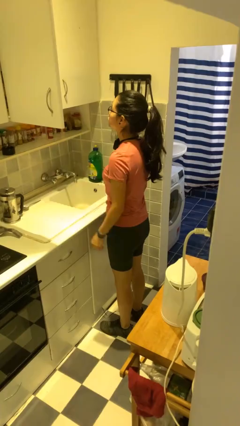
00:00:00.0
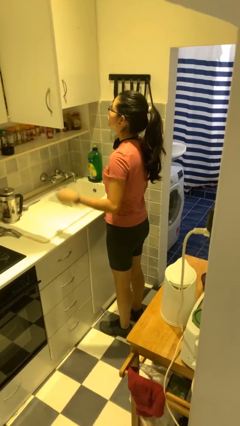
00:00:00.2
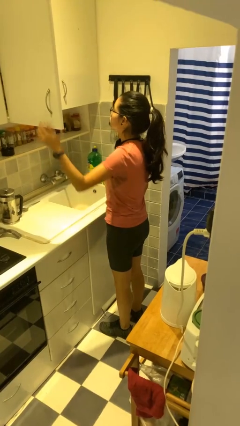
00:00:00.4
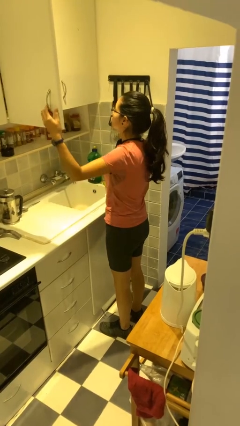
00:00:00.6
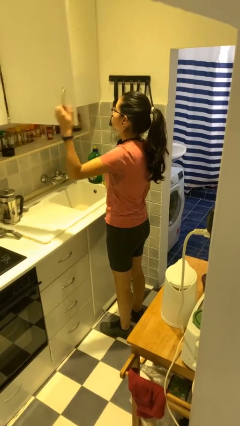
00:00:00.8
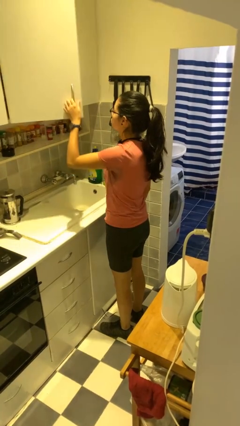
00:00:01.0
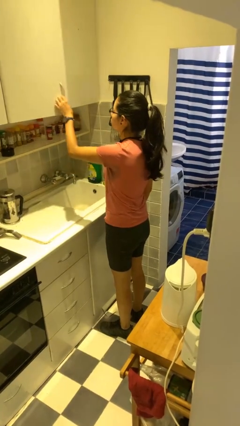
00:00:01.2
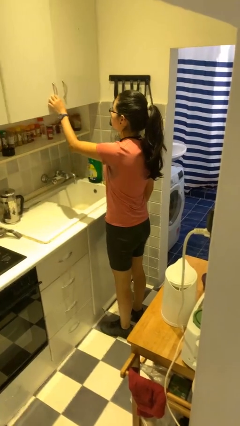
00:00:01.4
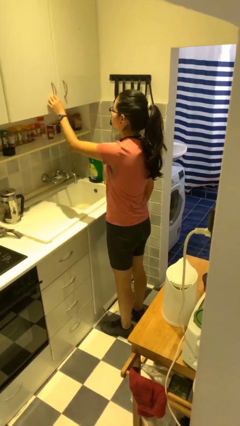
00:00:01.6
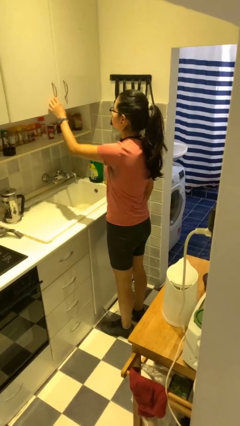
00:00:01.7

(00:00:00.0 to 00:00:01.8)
person closes cabinet

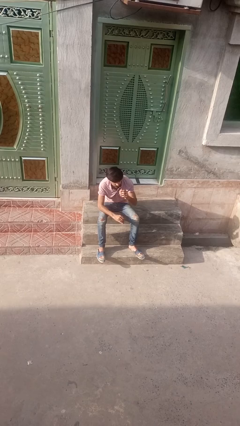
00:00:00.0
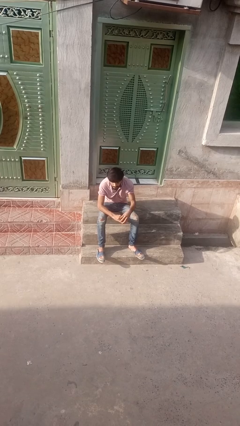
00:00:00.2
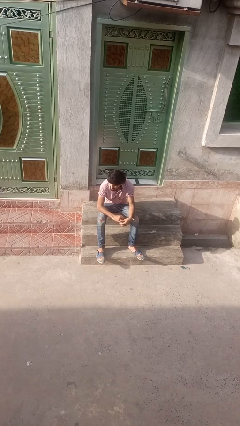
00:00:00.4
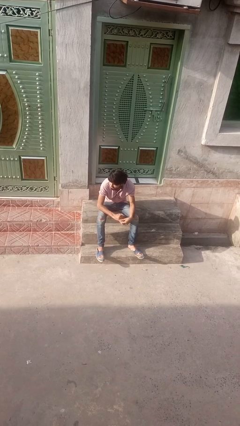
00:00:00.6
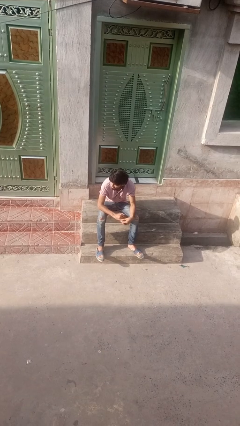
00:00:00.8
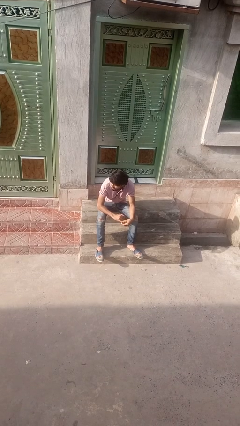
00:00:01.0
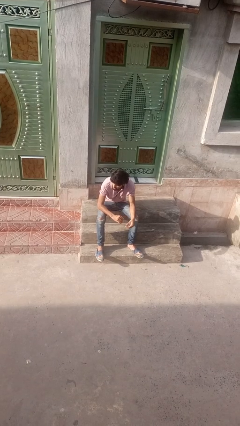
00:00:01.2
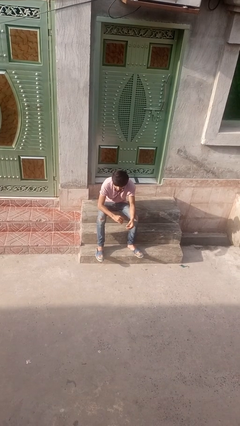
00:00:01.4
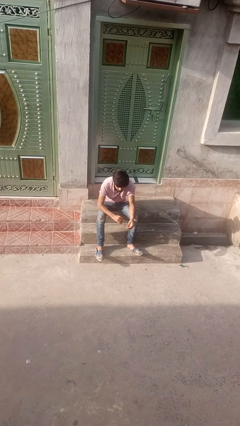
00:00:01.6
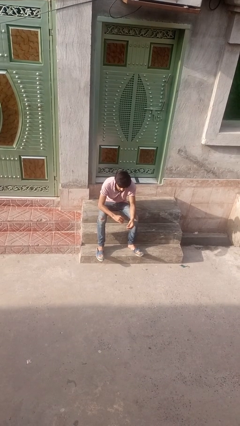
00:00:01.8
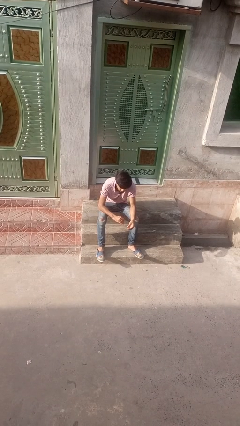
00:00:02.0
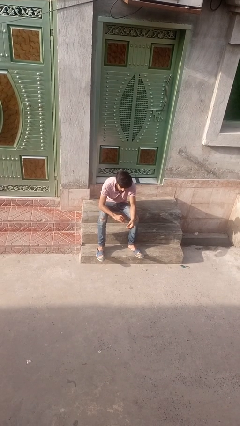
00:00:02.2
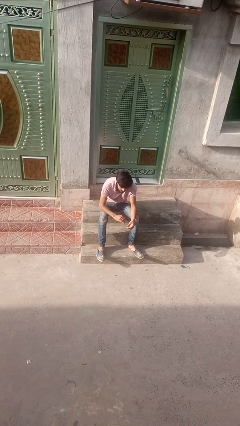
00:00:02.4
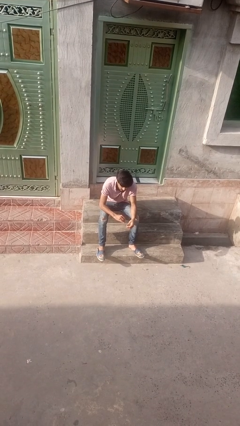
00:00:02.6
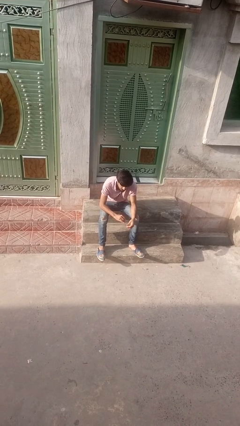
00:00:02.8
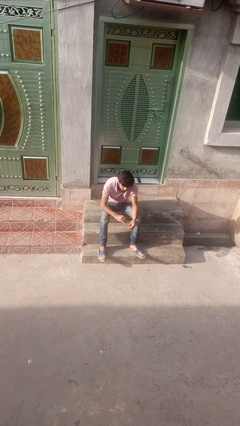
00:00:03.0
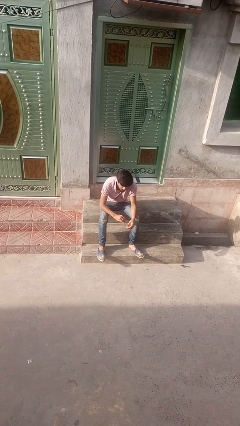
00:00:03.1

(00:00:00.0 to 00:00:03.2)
person takes off ring

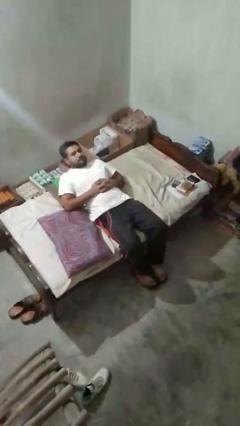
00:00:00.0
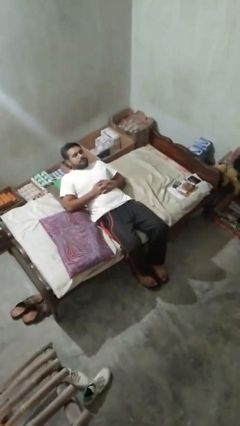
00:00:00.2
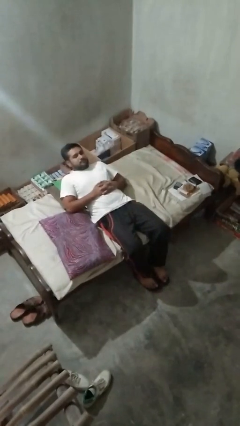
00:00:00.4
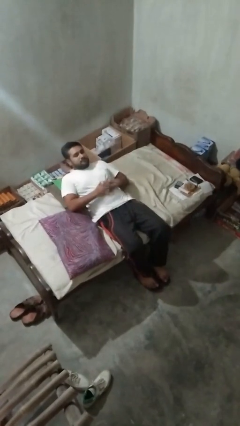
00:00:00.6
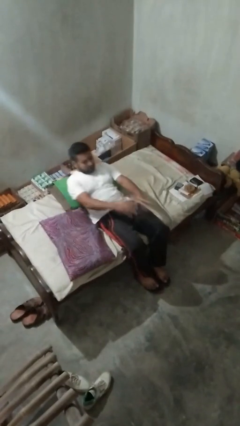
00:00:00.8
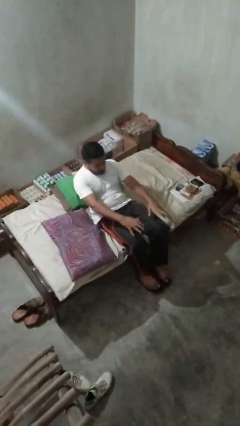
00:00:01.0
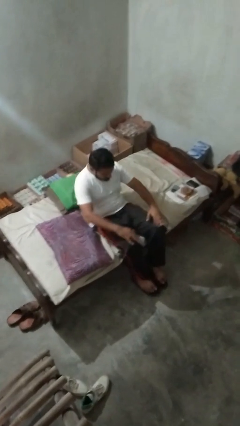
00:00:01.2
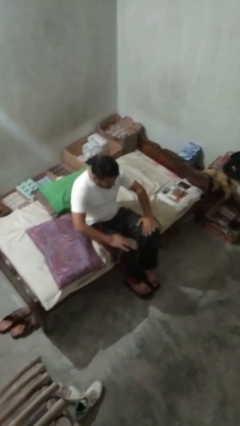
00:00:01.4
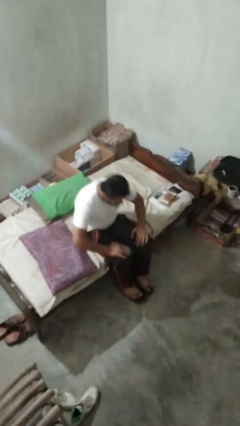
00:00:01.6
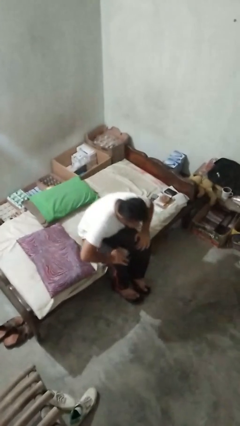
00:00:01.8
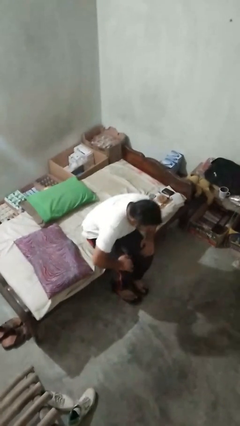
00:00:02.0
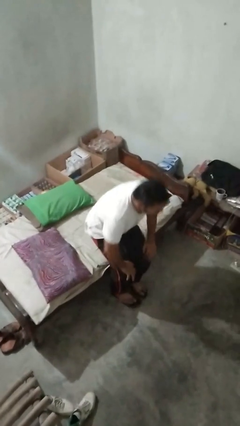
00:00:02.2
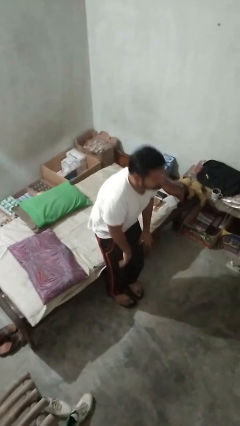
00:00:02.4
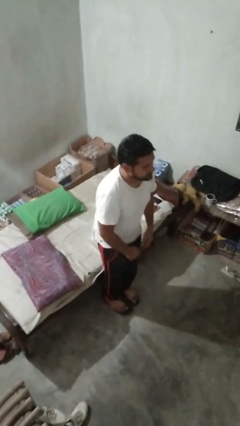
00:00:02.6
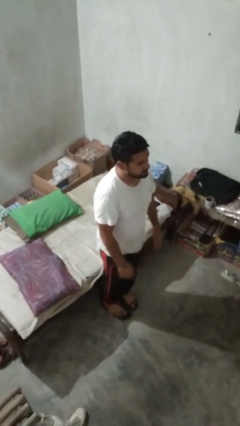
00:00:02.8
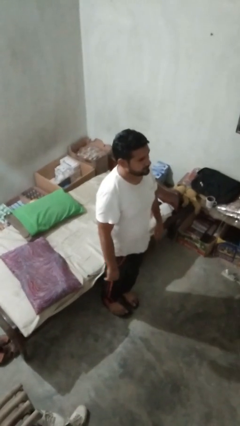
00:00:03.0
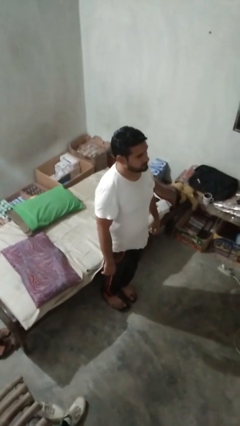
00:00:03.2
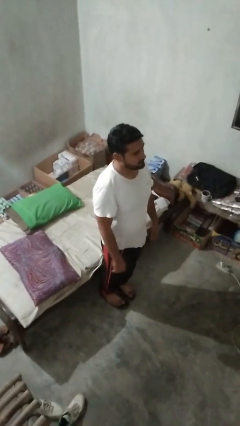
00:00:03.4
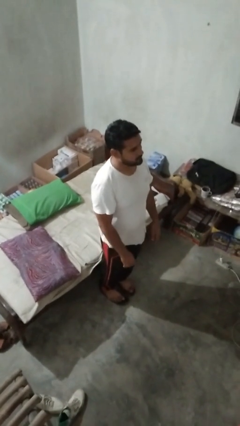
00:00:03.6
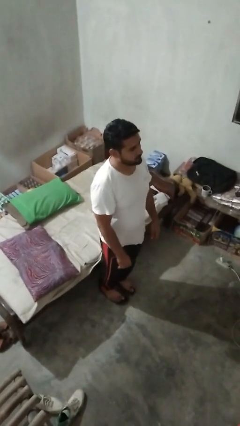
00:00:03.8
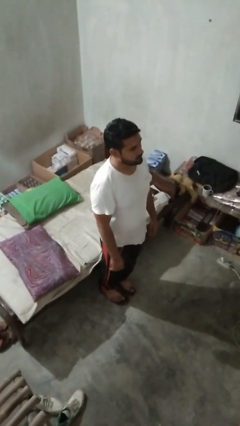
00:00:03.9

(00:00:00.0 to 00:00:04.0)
person stands up

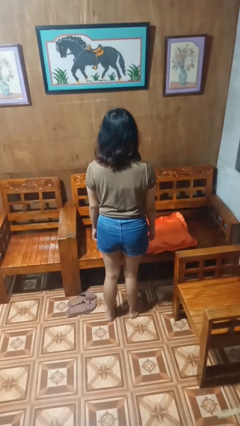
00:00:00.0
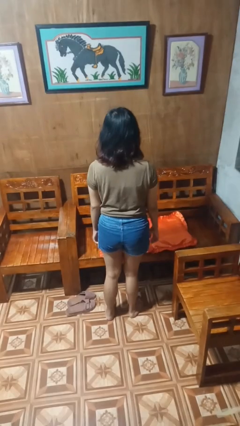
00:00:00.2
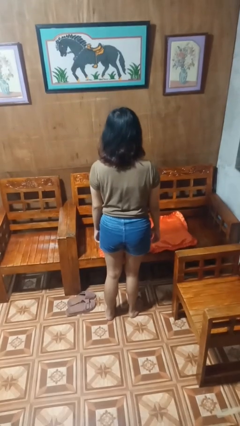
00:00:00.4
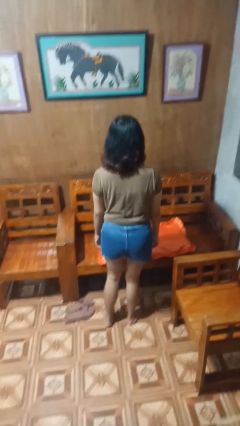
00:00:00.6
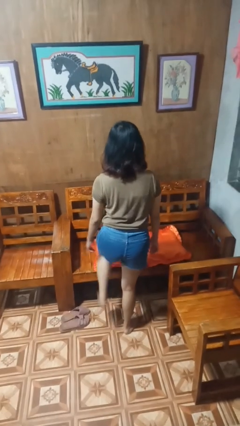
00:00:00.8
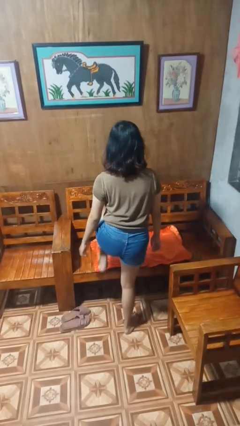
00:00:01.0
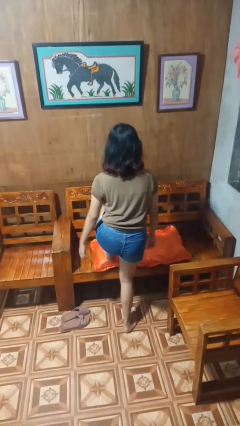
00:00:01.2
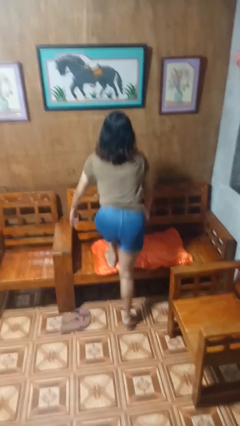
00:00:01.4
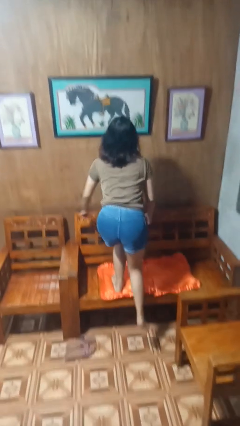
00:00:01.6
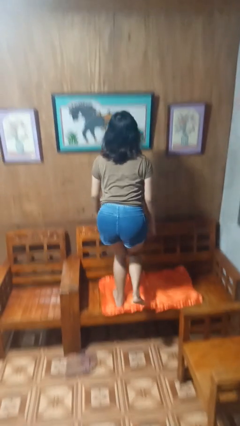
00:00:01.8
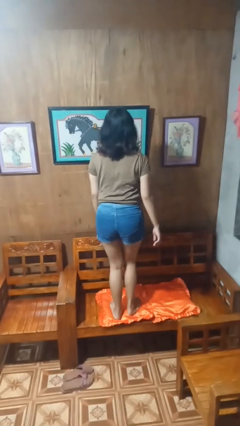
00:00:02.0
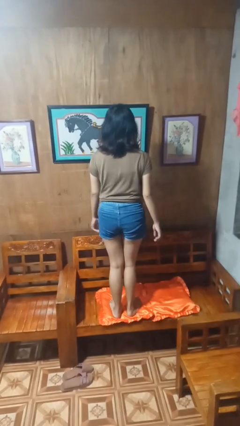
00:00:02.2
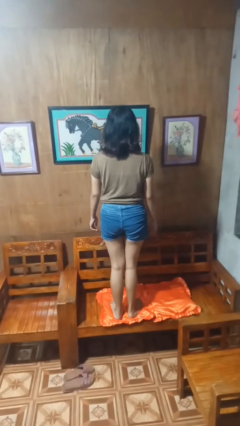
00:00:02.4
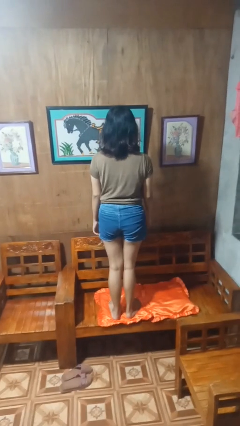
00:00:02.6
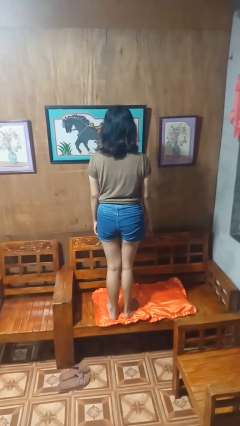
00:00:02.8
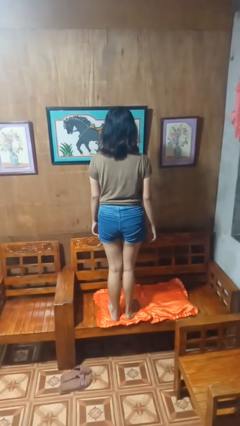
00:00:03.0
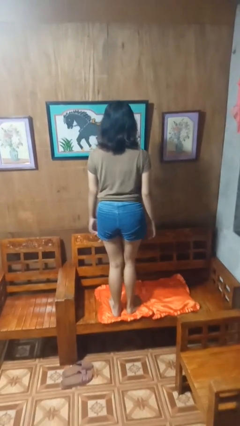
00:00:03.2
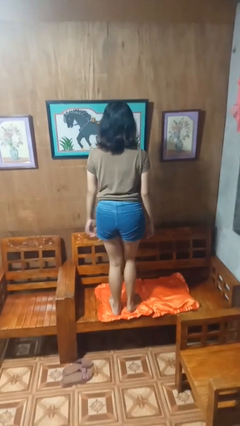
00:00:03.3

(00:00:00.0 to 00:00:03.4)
person climbs on couch

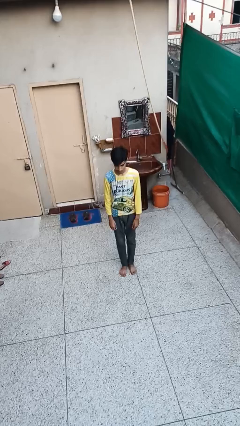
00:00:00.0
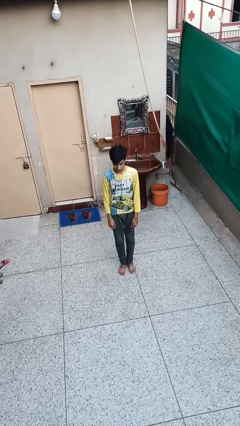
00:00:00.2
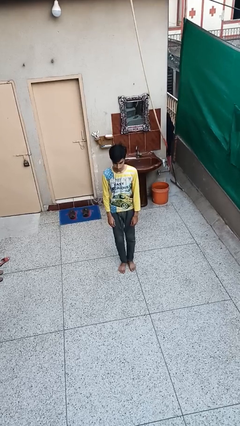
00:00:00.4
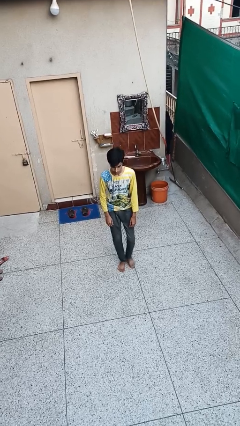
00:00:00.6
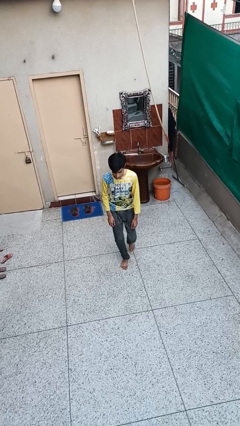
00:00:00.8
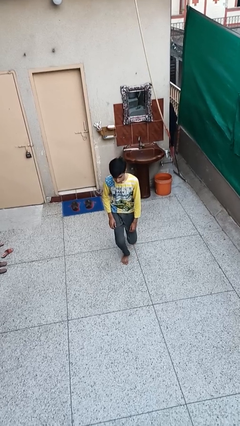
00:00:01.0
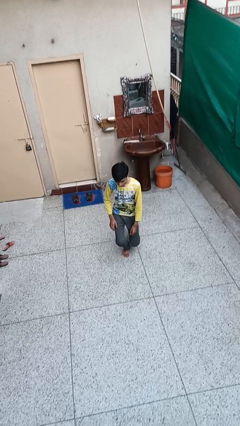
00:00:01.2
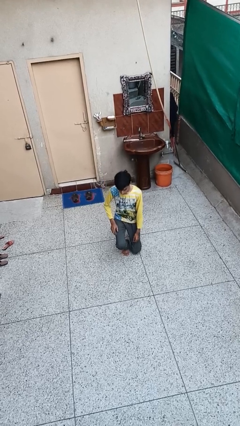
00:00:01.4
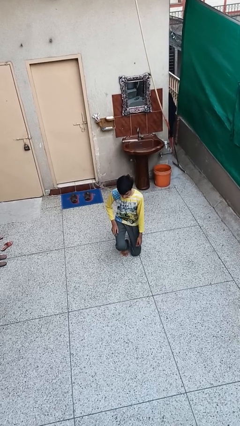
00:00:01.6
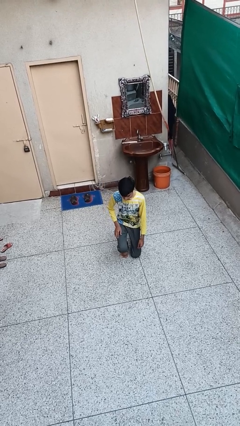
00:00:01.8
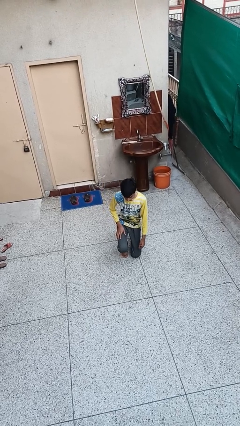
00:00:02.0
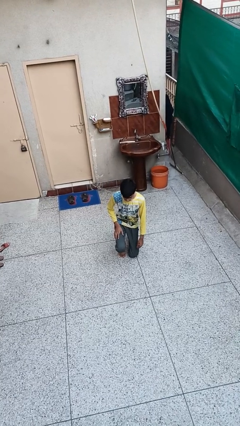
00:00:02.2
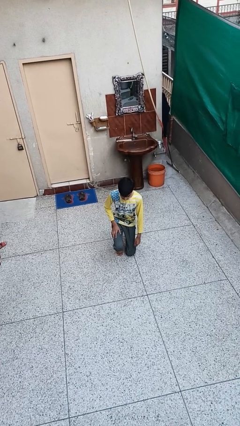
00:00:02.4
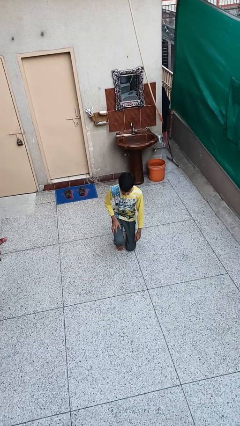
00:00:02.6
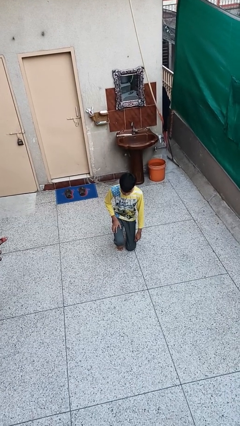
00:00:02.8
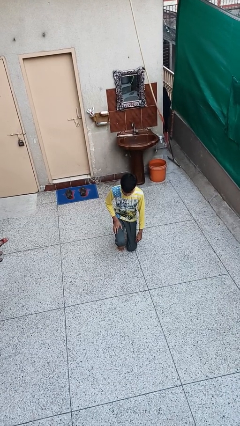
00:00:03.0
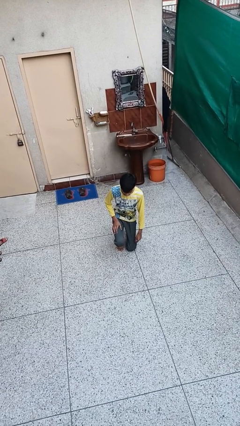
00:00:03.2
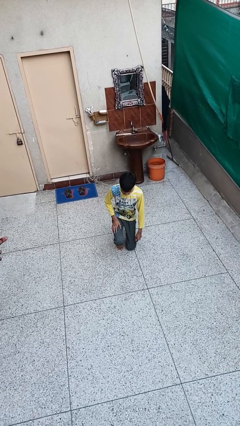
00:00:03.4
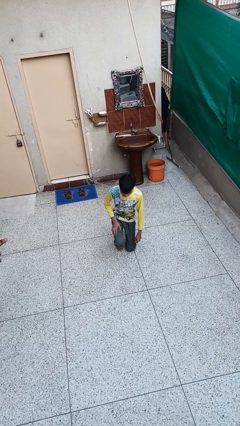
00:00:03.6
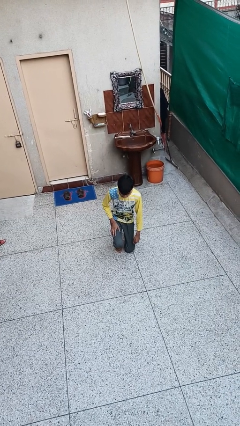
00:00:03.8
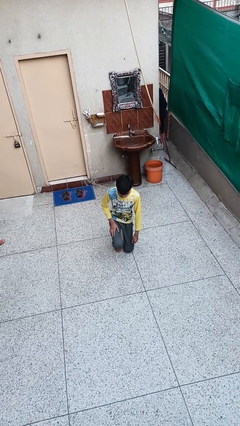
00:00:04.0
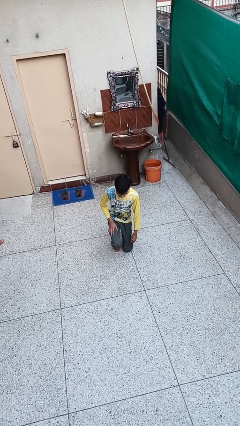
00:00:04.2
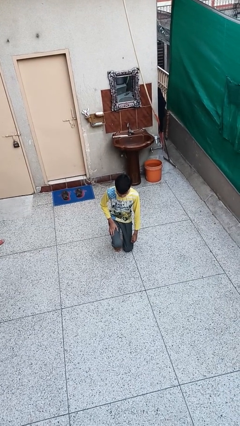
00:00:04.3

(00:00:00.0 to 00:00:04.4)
person kneels

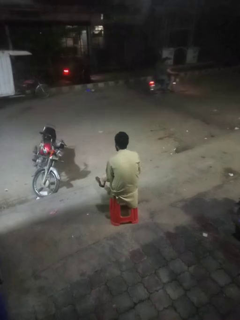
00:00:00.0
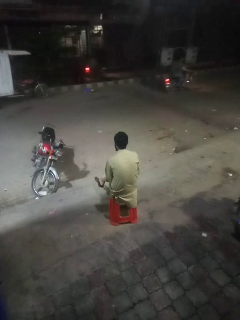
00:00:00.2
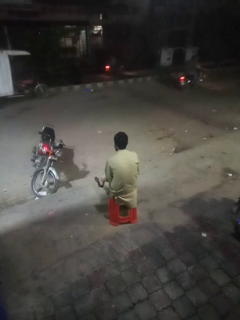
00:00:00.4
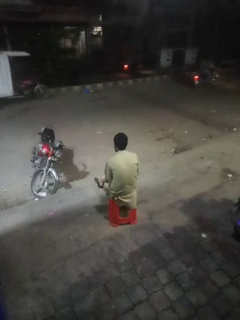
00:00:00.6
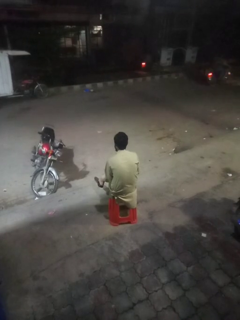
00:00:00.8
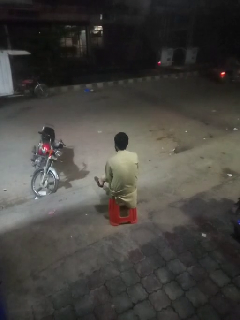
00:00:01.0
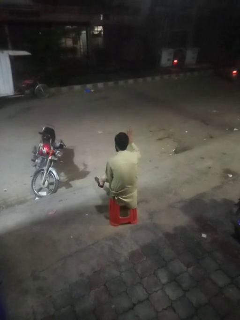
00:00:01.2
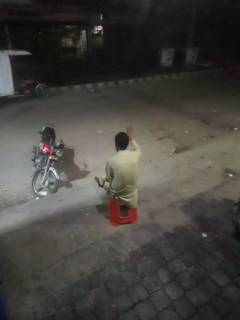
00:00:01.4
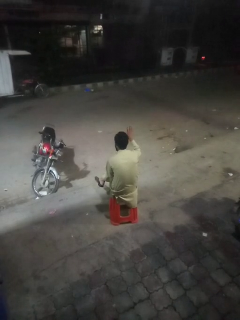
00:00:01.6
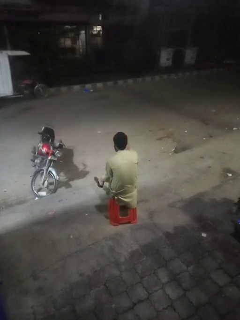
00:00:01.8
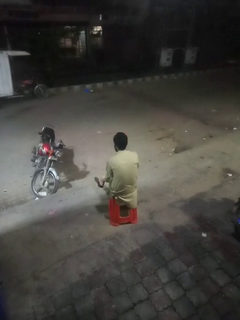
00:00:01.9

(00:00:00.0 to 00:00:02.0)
person gestures number five
